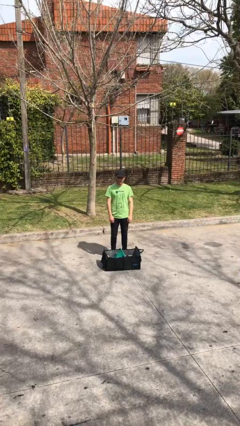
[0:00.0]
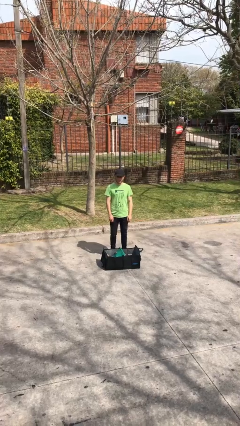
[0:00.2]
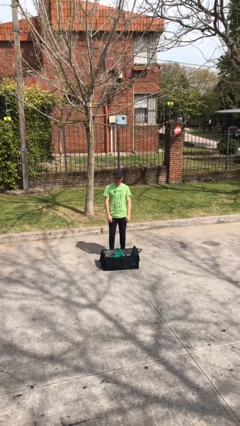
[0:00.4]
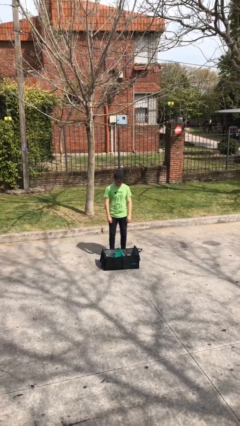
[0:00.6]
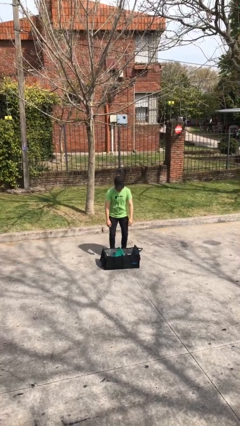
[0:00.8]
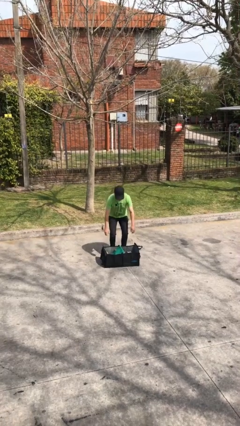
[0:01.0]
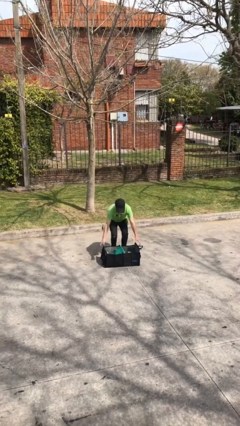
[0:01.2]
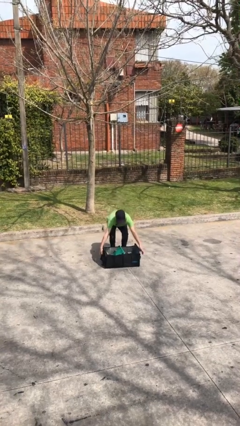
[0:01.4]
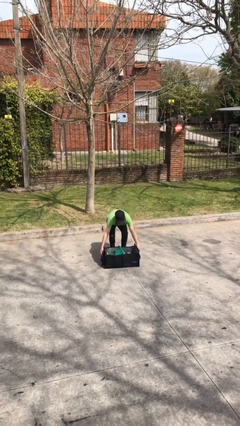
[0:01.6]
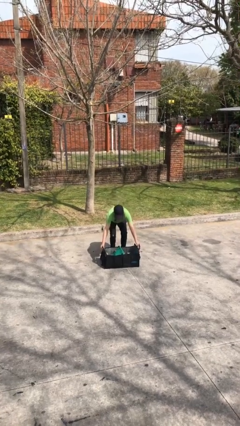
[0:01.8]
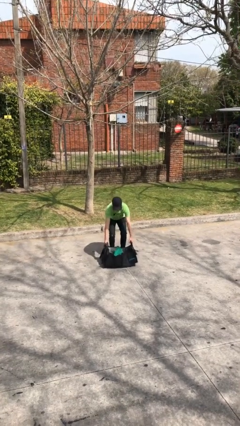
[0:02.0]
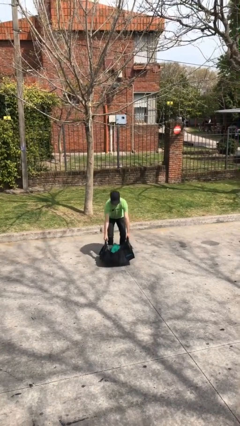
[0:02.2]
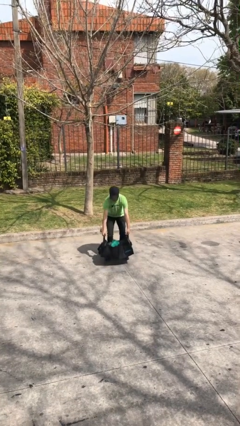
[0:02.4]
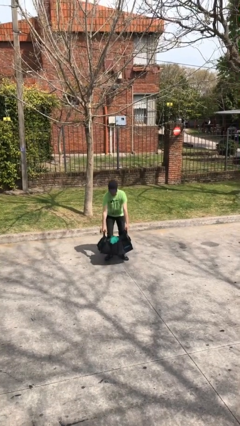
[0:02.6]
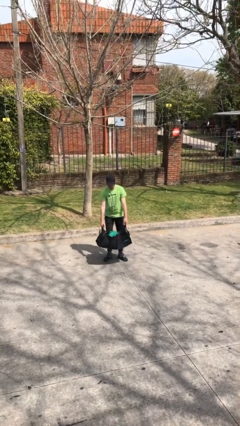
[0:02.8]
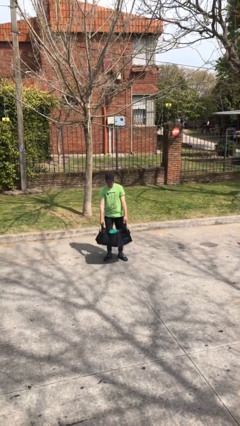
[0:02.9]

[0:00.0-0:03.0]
person picks up object from floor

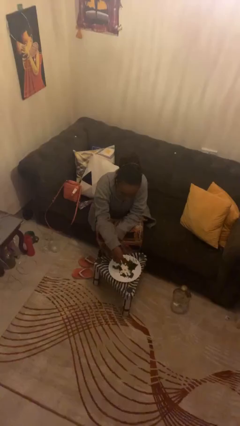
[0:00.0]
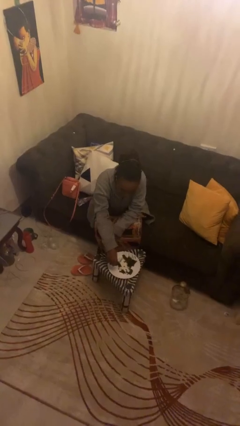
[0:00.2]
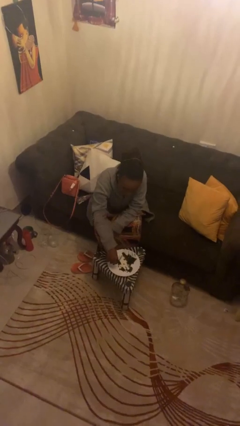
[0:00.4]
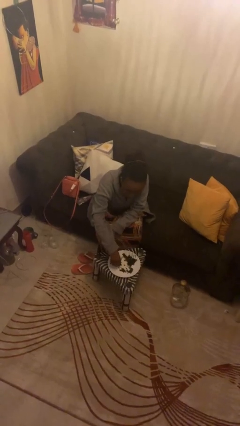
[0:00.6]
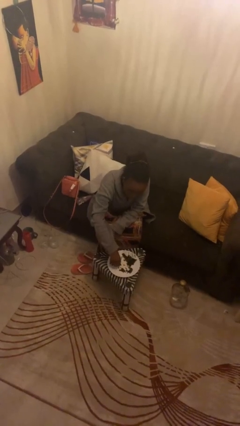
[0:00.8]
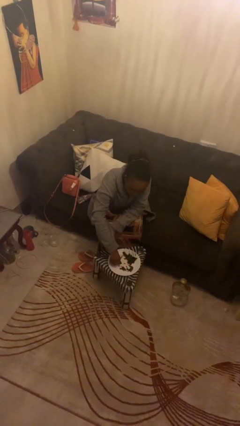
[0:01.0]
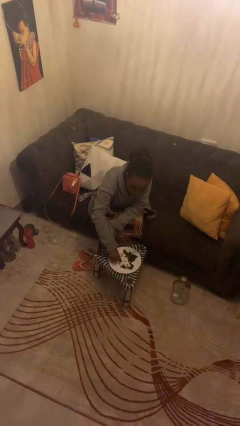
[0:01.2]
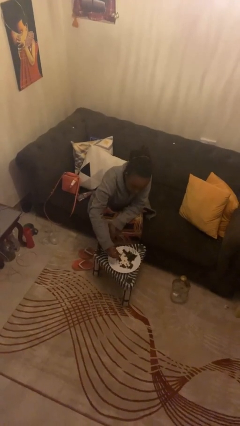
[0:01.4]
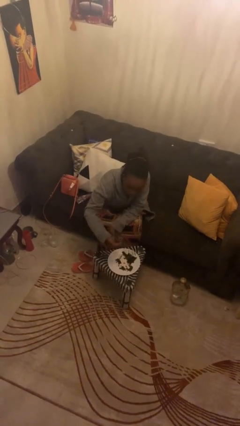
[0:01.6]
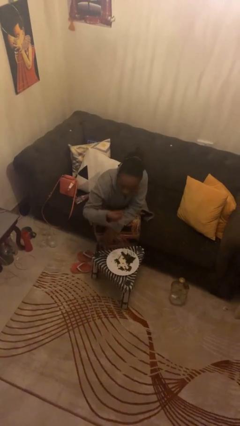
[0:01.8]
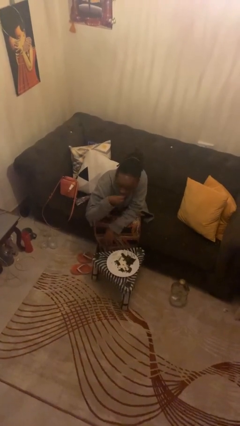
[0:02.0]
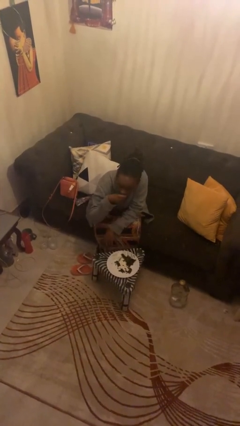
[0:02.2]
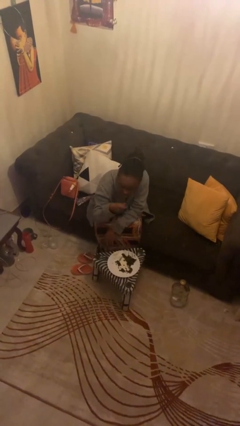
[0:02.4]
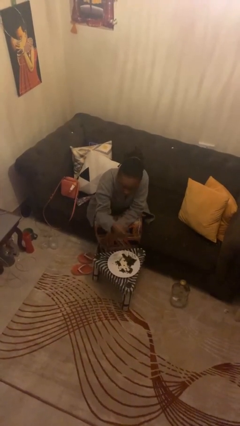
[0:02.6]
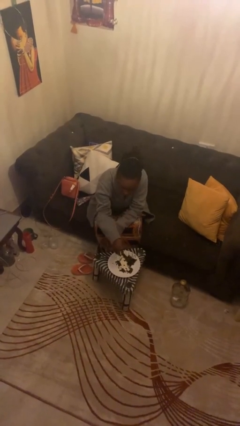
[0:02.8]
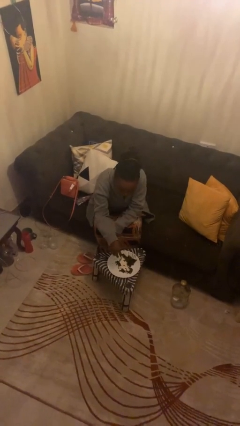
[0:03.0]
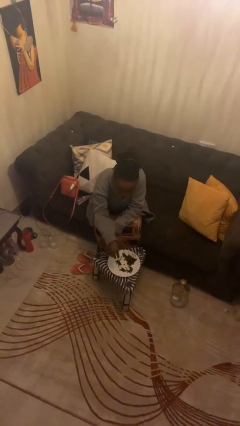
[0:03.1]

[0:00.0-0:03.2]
person eats with hands

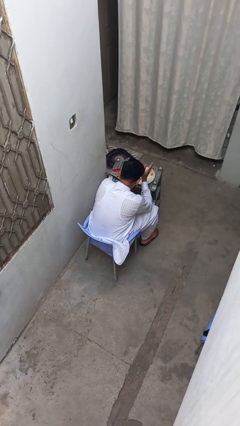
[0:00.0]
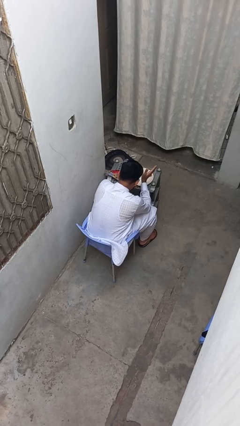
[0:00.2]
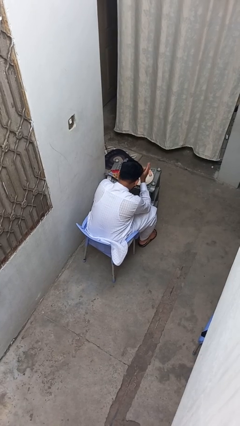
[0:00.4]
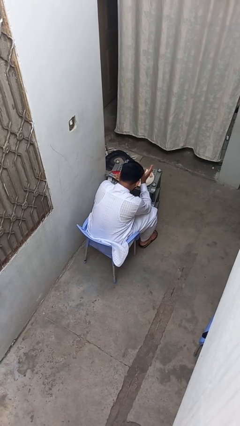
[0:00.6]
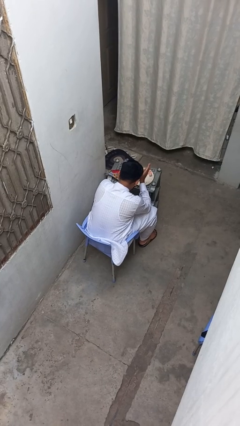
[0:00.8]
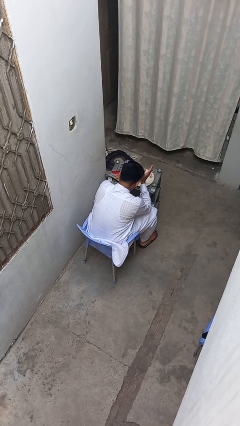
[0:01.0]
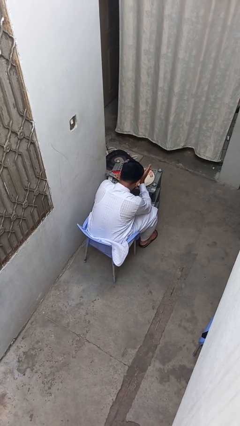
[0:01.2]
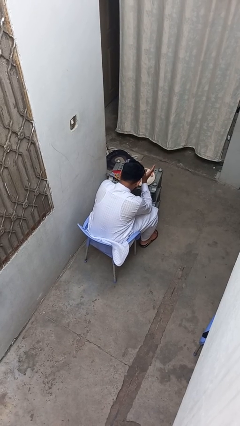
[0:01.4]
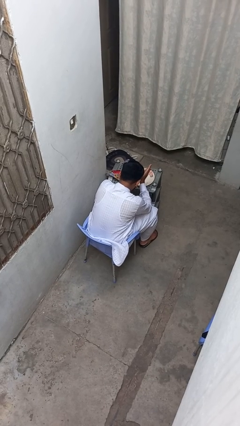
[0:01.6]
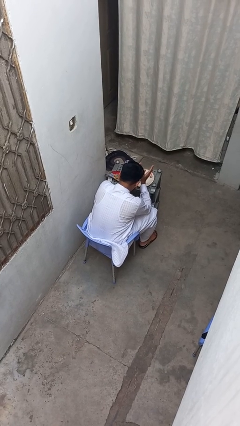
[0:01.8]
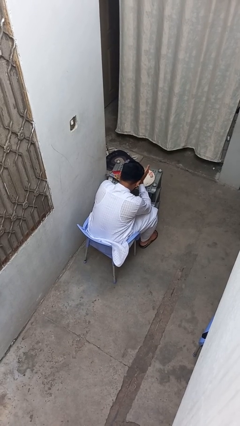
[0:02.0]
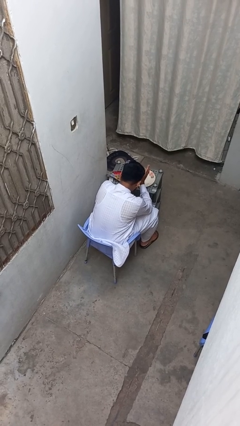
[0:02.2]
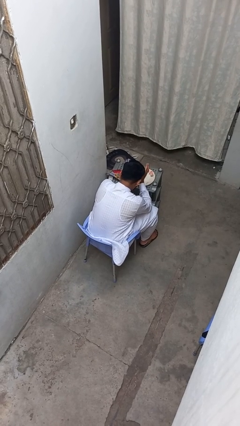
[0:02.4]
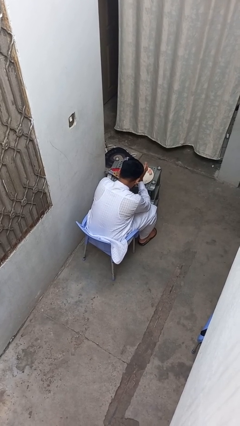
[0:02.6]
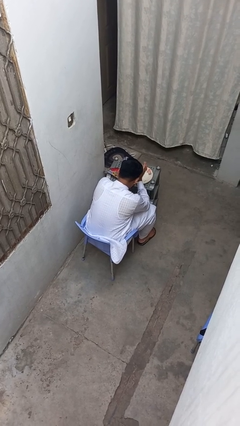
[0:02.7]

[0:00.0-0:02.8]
person claps hands

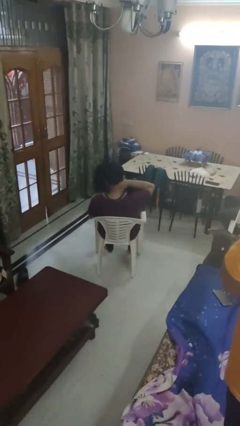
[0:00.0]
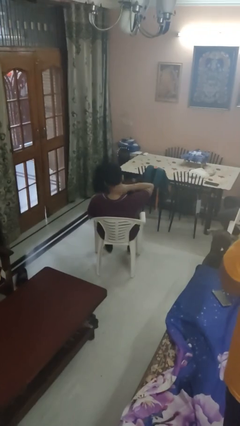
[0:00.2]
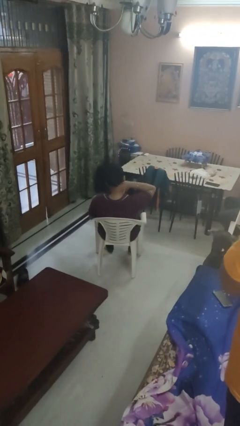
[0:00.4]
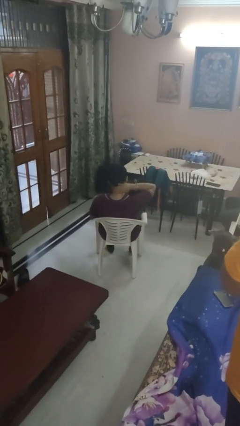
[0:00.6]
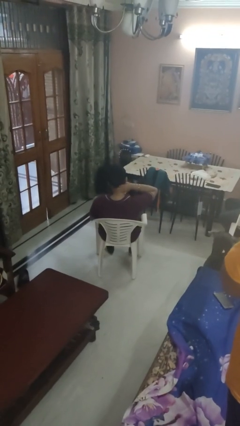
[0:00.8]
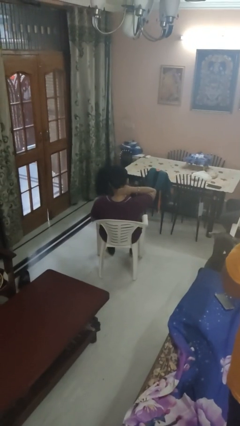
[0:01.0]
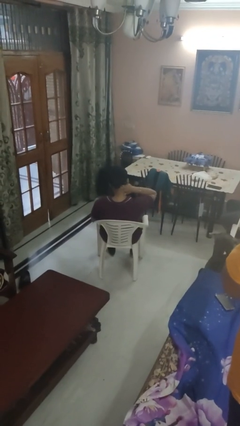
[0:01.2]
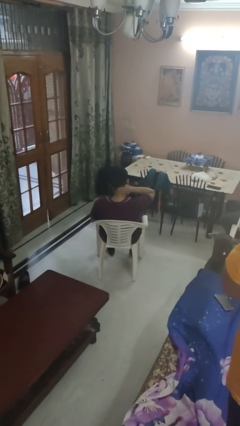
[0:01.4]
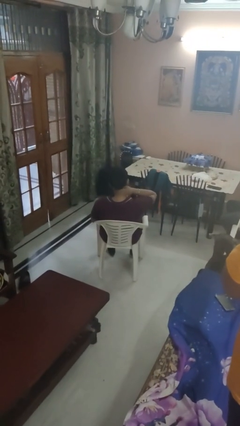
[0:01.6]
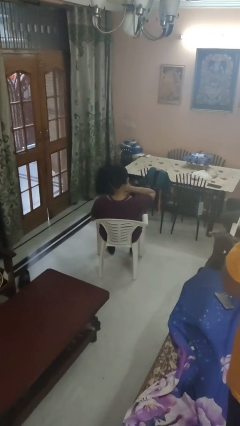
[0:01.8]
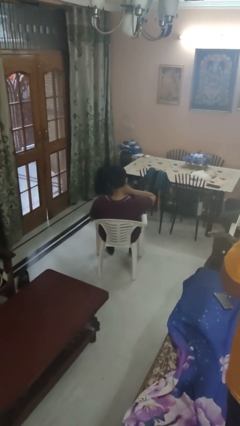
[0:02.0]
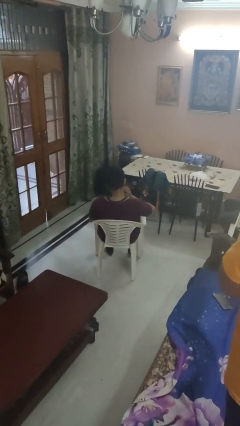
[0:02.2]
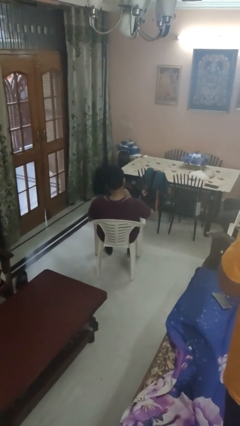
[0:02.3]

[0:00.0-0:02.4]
person rubs neck

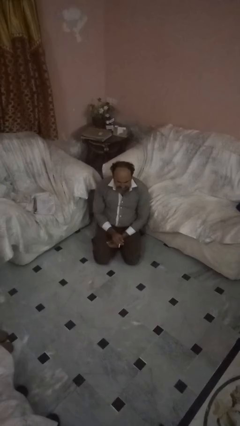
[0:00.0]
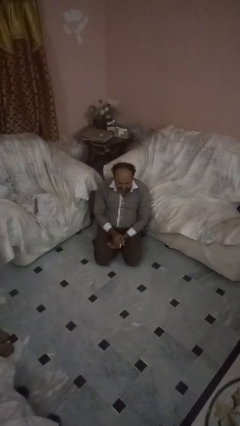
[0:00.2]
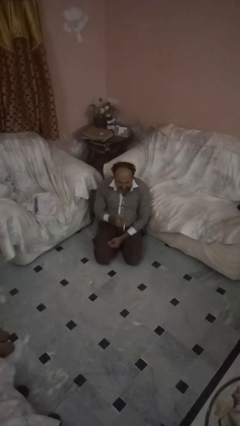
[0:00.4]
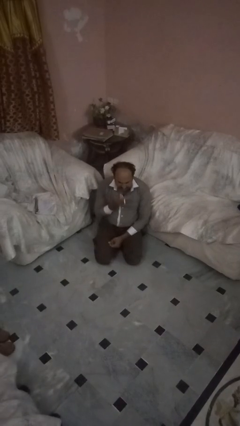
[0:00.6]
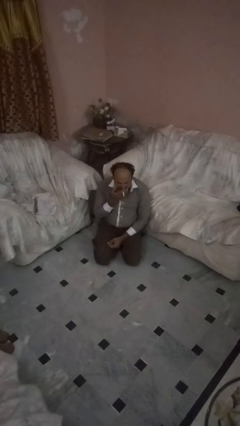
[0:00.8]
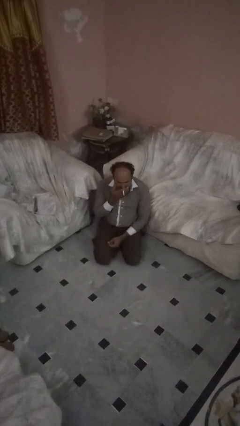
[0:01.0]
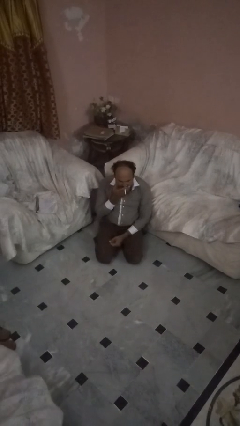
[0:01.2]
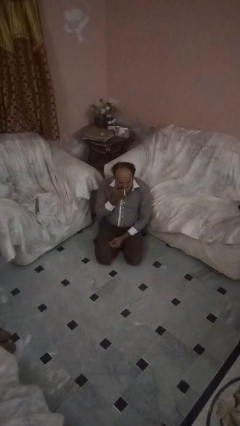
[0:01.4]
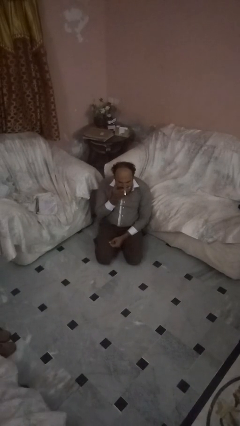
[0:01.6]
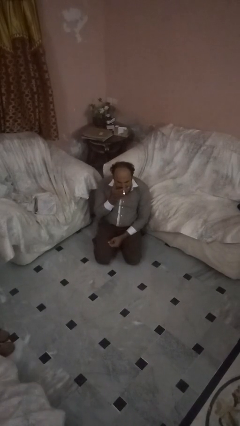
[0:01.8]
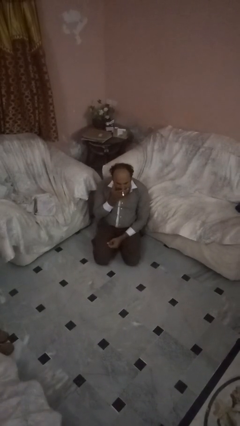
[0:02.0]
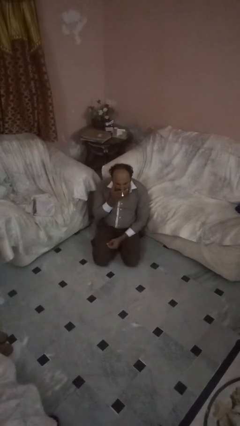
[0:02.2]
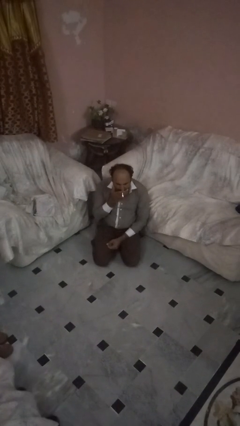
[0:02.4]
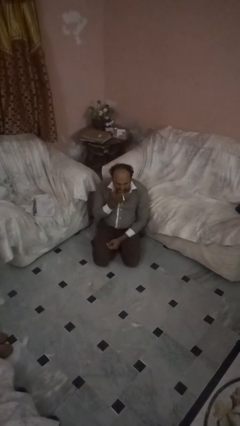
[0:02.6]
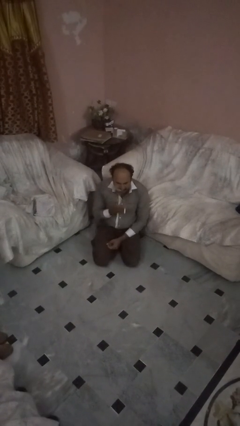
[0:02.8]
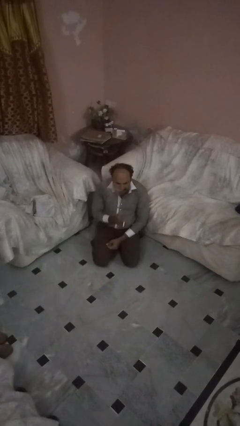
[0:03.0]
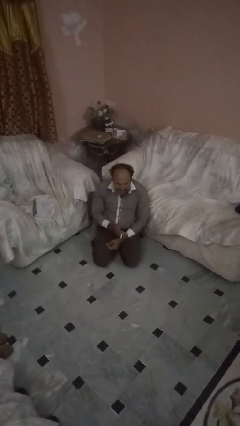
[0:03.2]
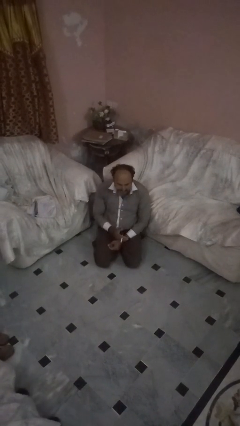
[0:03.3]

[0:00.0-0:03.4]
person vapes

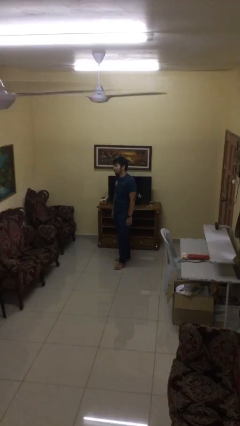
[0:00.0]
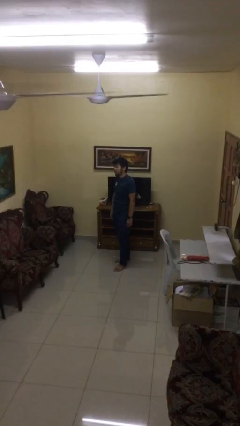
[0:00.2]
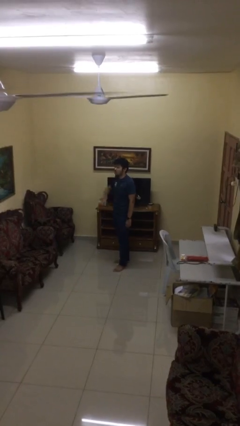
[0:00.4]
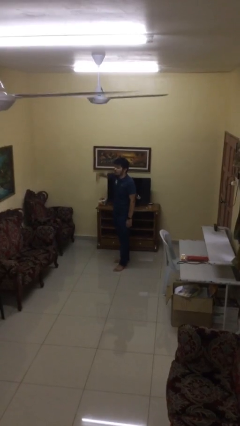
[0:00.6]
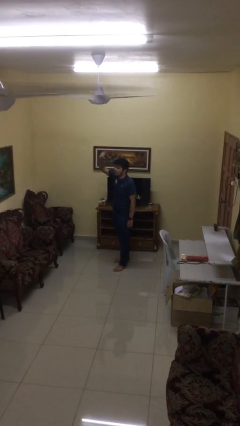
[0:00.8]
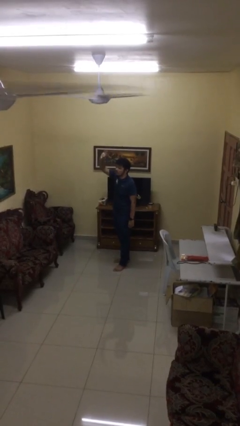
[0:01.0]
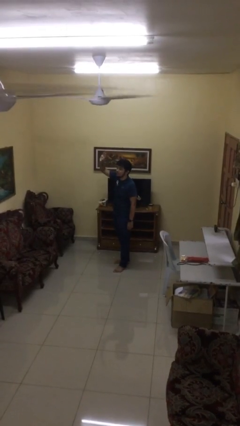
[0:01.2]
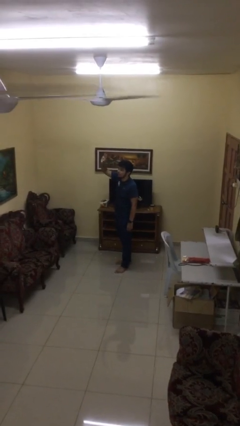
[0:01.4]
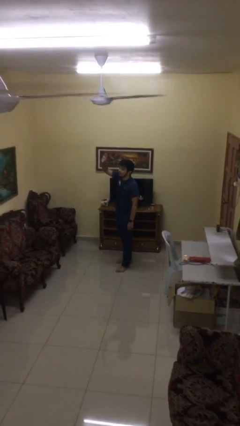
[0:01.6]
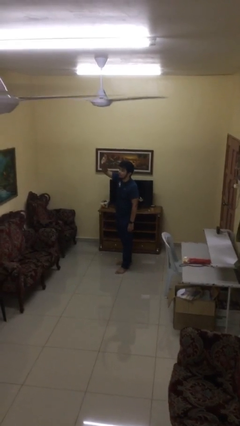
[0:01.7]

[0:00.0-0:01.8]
person gestures swipe up

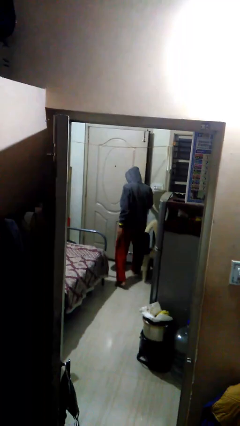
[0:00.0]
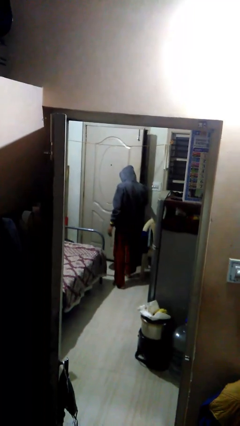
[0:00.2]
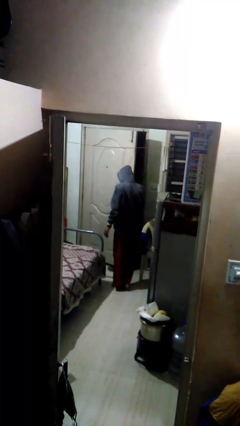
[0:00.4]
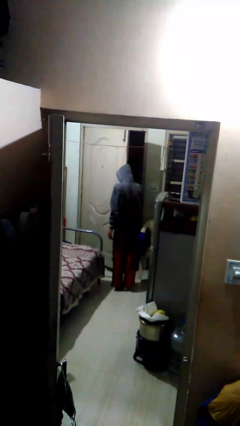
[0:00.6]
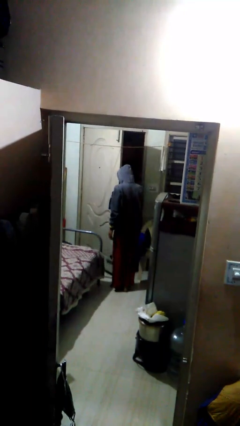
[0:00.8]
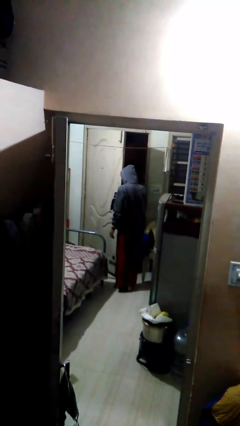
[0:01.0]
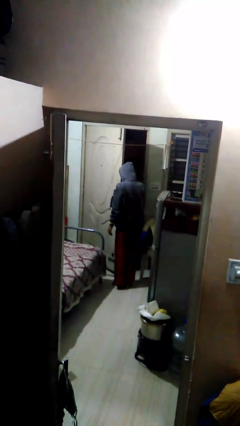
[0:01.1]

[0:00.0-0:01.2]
person opens facility door
